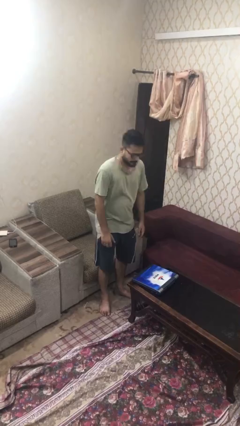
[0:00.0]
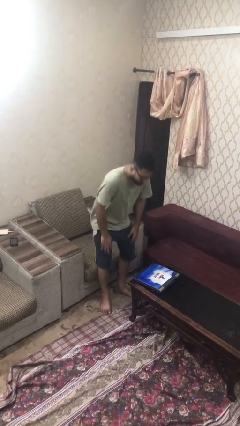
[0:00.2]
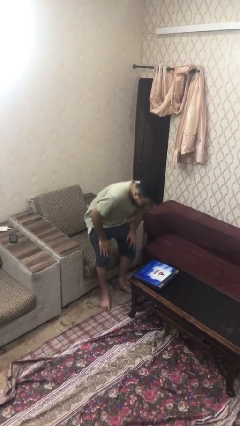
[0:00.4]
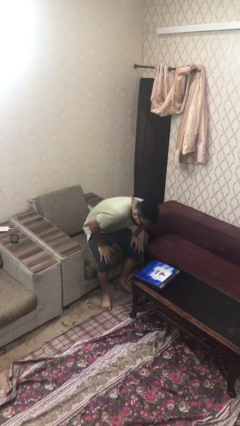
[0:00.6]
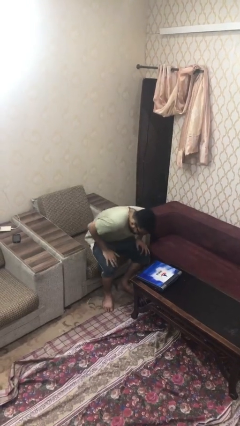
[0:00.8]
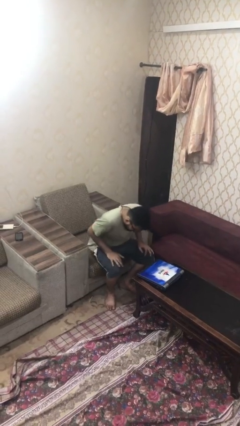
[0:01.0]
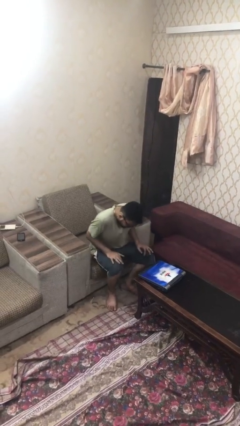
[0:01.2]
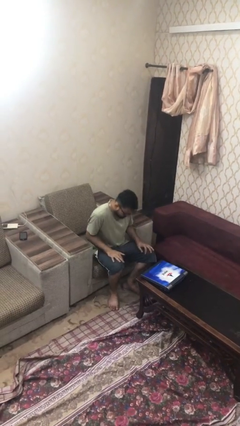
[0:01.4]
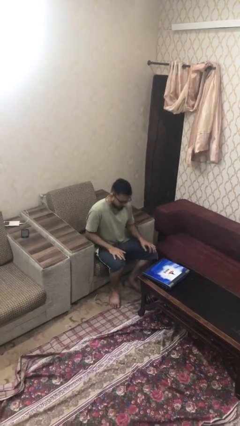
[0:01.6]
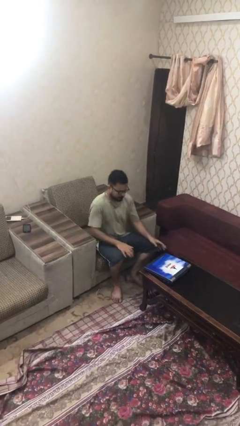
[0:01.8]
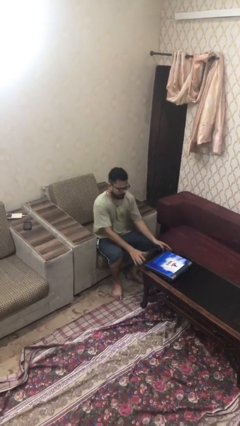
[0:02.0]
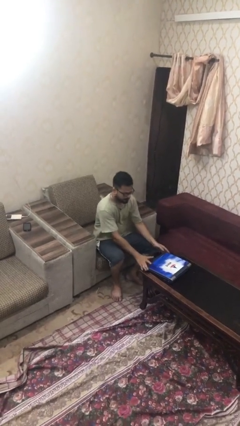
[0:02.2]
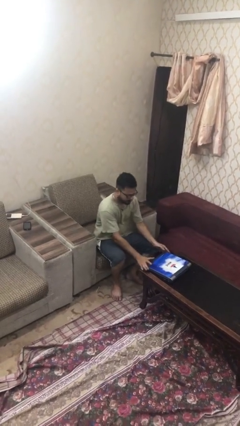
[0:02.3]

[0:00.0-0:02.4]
person sits down

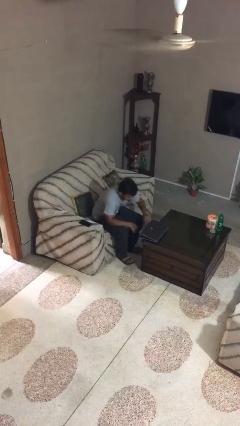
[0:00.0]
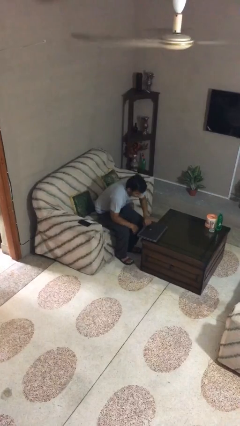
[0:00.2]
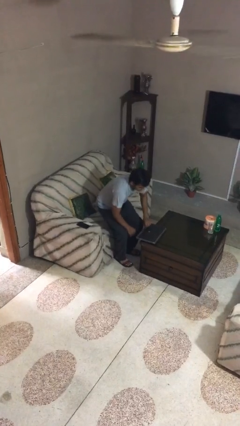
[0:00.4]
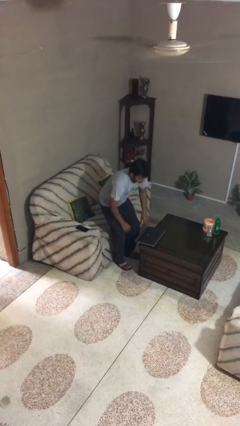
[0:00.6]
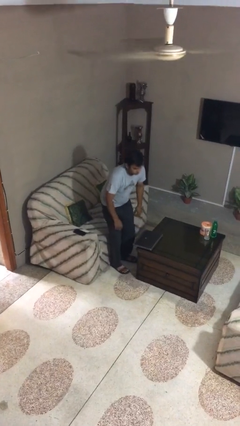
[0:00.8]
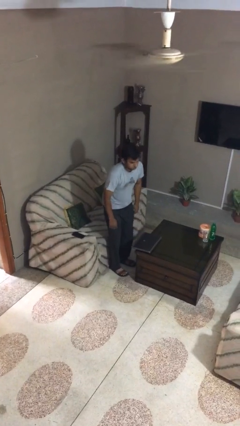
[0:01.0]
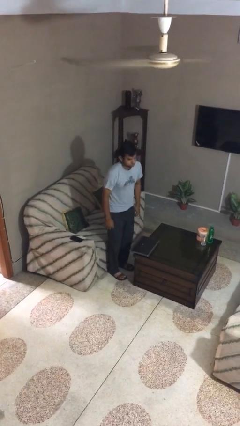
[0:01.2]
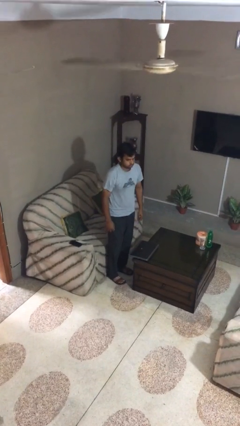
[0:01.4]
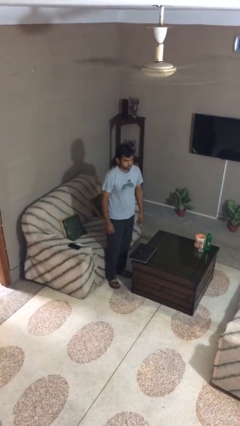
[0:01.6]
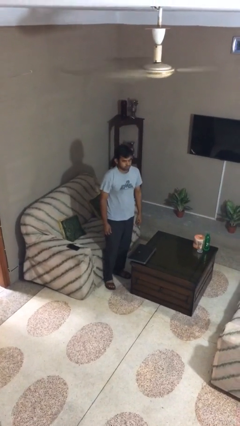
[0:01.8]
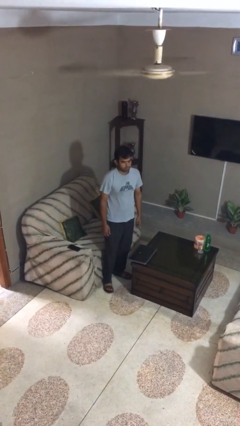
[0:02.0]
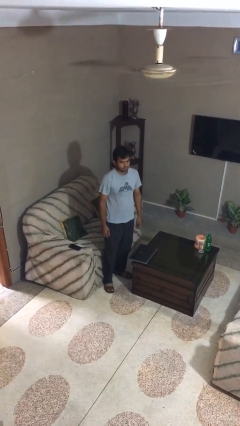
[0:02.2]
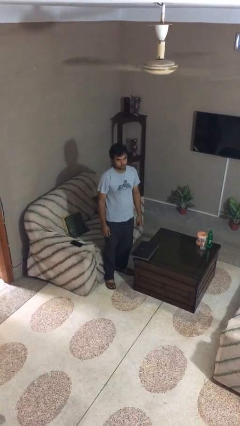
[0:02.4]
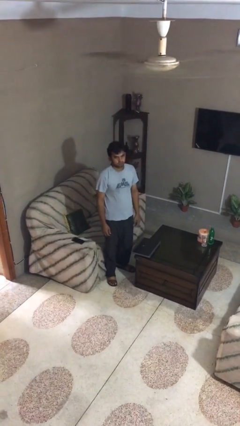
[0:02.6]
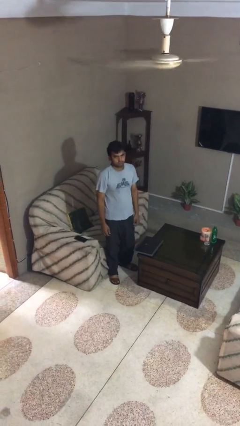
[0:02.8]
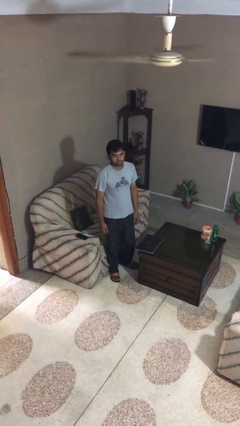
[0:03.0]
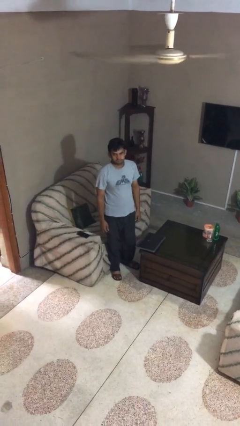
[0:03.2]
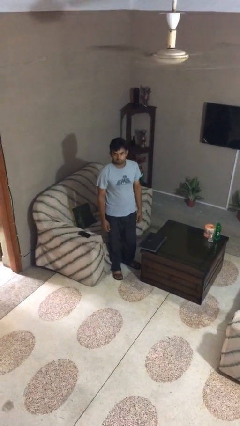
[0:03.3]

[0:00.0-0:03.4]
person stands up

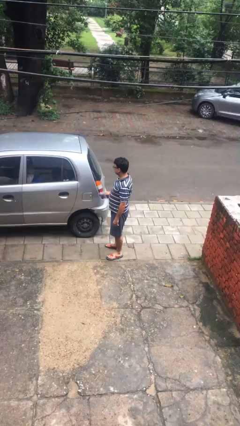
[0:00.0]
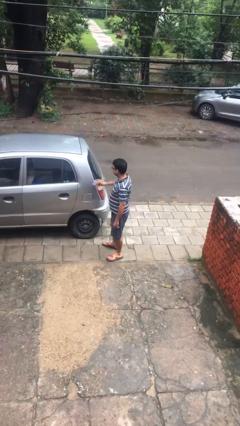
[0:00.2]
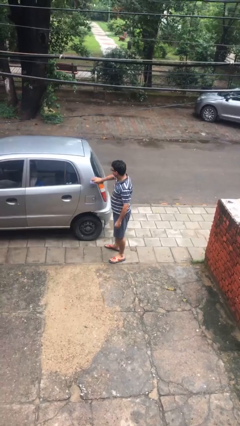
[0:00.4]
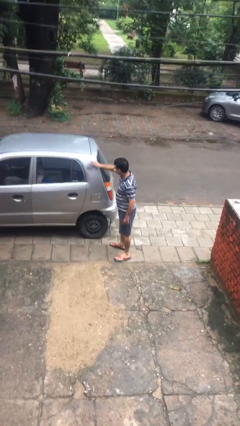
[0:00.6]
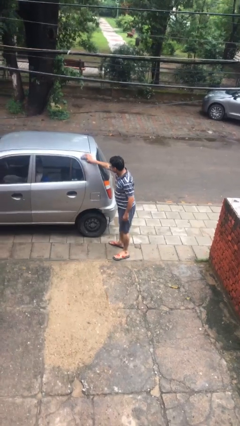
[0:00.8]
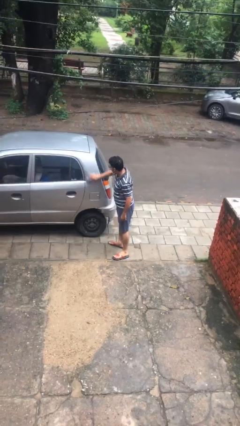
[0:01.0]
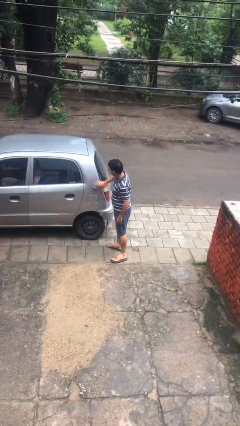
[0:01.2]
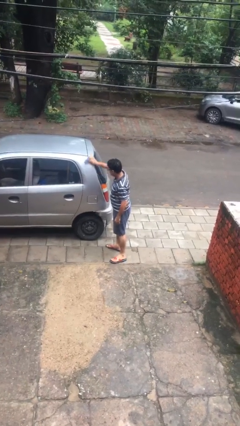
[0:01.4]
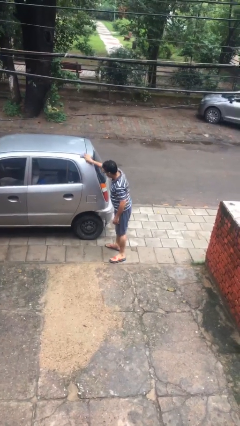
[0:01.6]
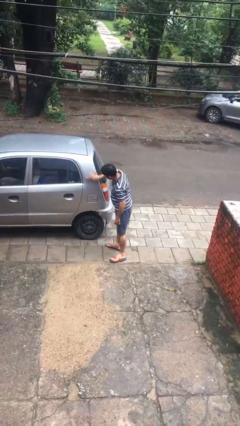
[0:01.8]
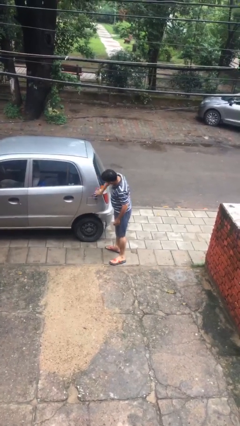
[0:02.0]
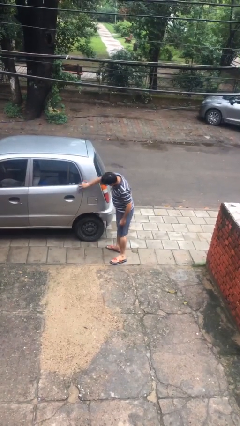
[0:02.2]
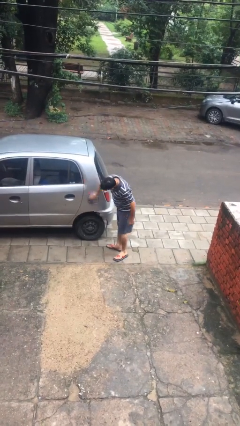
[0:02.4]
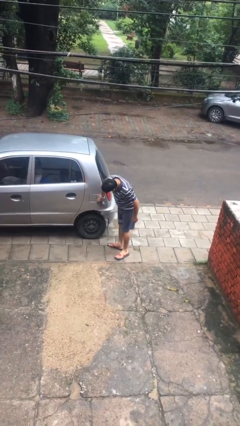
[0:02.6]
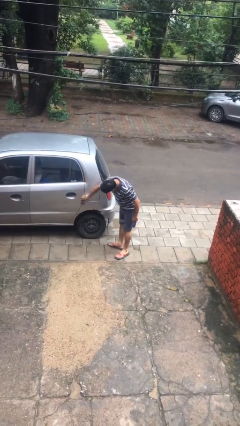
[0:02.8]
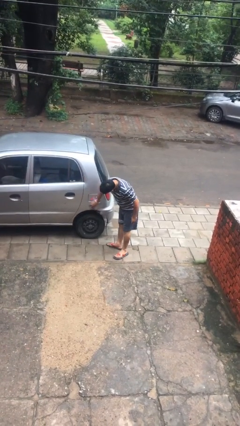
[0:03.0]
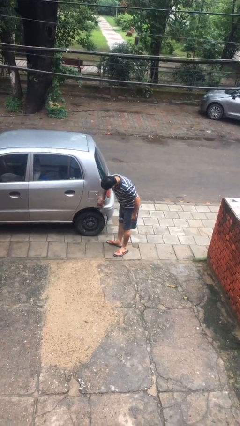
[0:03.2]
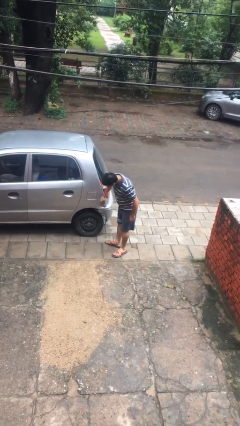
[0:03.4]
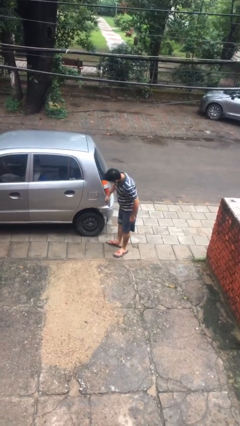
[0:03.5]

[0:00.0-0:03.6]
person polishes car with rag

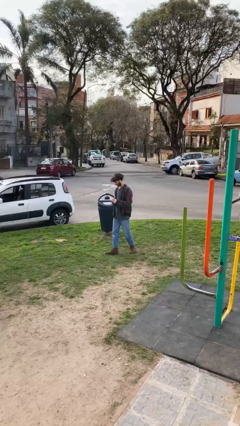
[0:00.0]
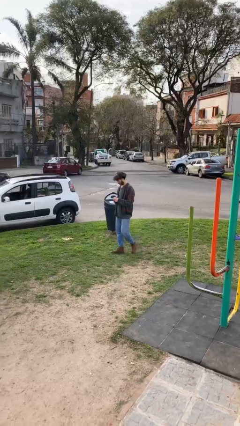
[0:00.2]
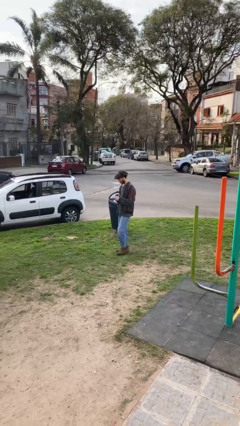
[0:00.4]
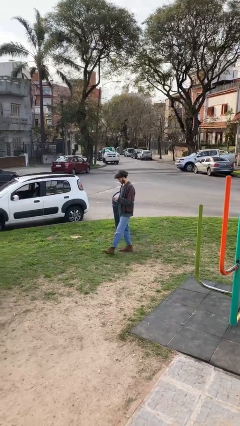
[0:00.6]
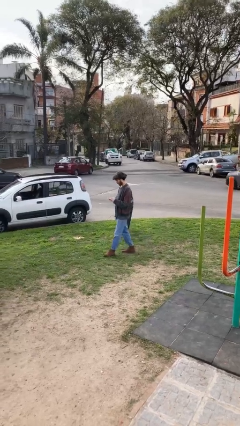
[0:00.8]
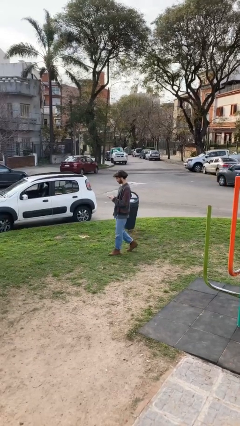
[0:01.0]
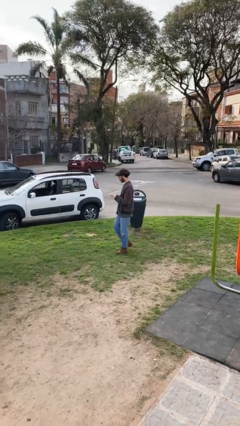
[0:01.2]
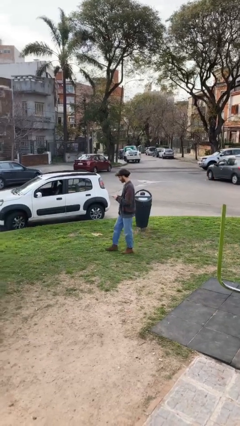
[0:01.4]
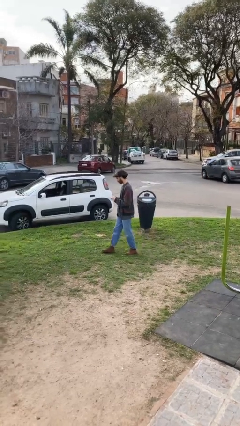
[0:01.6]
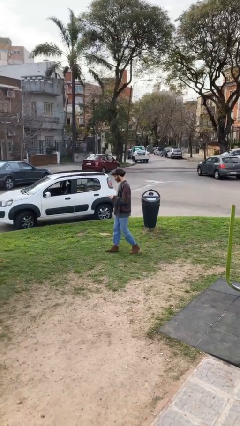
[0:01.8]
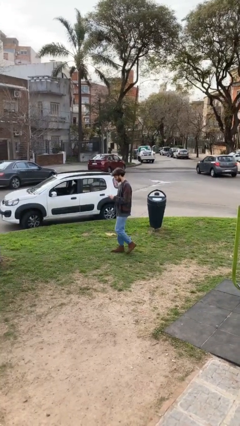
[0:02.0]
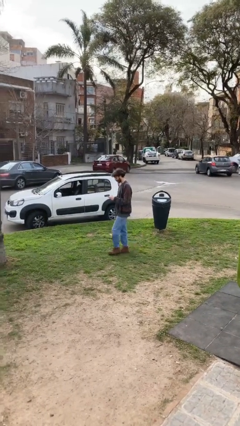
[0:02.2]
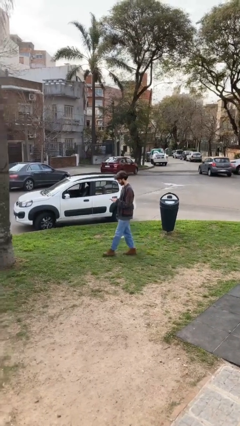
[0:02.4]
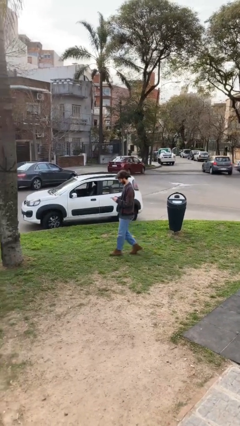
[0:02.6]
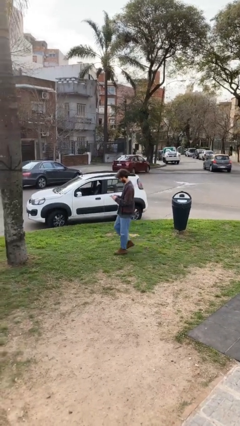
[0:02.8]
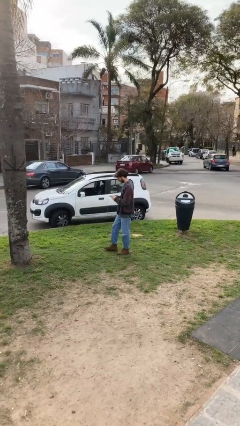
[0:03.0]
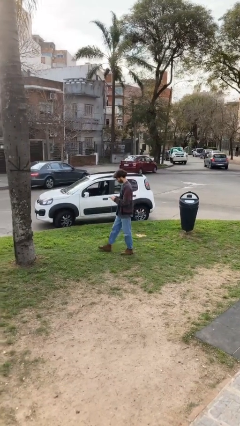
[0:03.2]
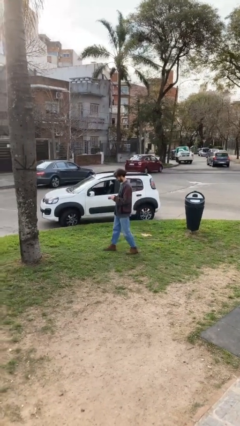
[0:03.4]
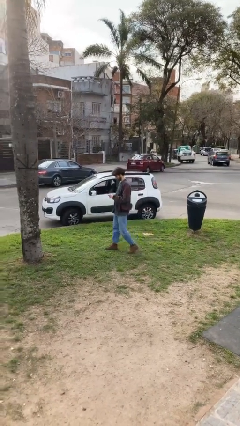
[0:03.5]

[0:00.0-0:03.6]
person texts on phone

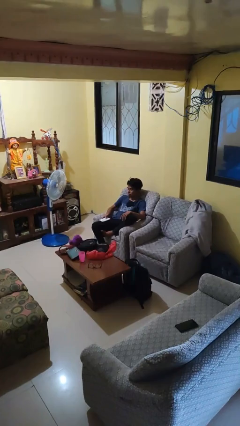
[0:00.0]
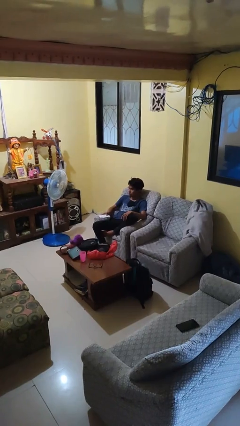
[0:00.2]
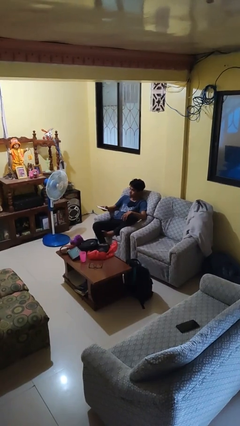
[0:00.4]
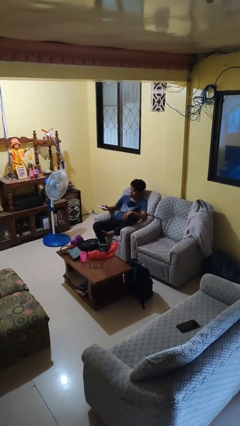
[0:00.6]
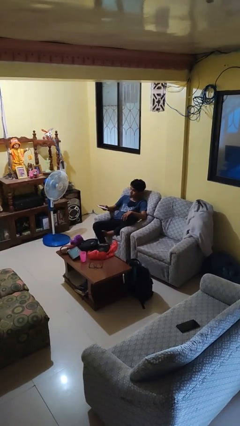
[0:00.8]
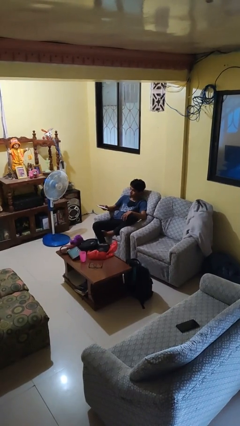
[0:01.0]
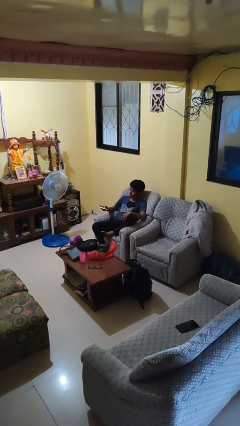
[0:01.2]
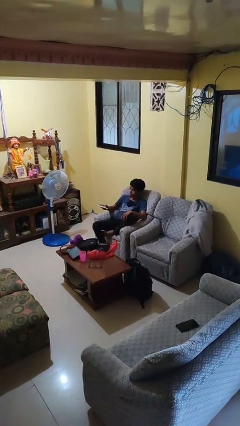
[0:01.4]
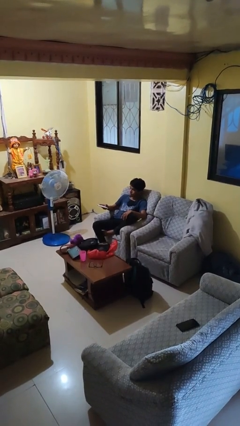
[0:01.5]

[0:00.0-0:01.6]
person uses television remote

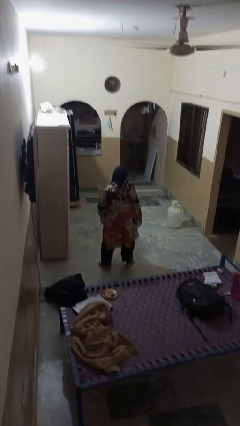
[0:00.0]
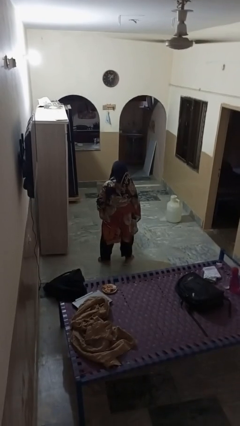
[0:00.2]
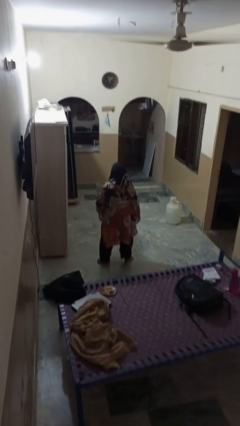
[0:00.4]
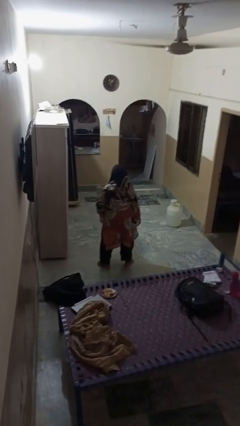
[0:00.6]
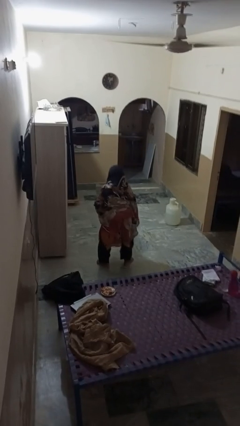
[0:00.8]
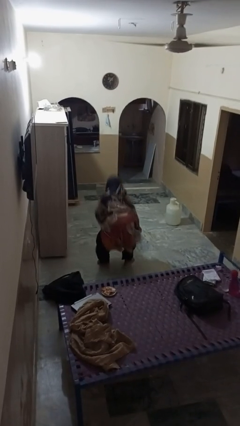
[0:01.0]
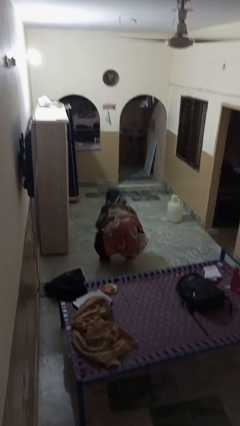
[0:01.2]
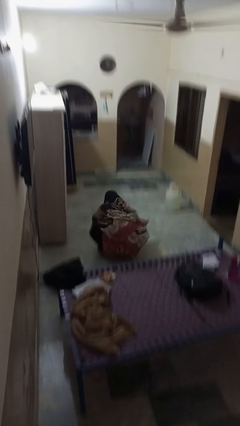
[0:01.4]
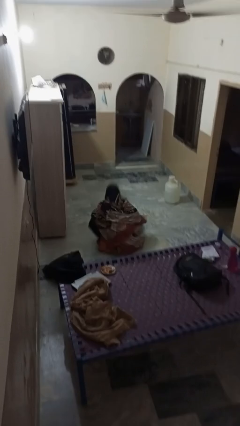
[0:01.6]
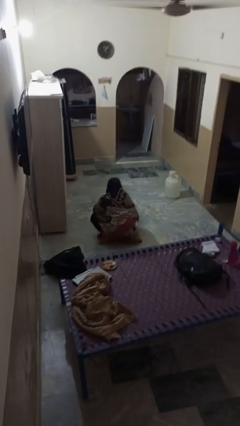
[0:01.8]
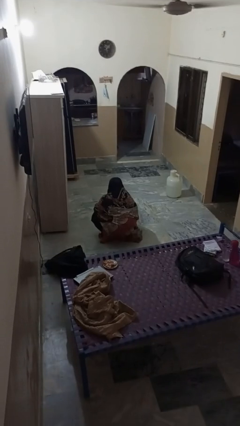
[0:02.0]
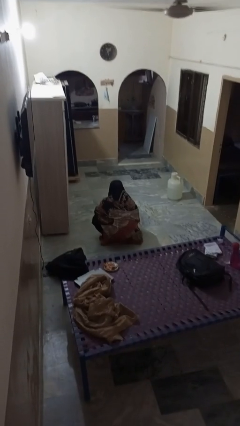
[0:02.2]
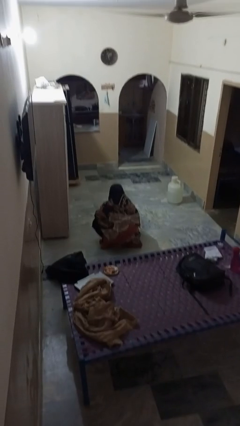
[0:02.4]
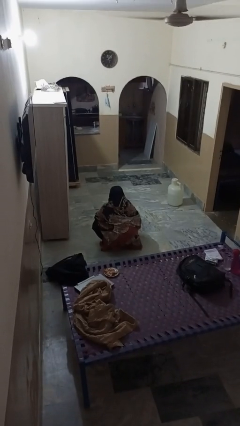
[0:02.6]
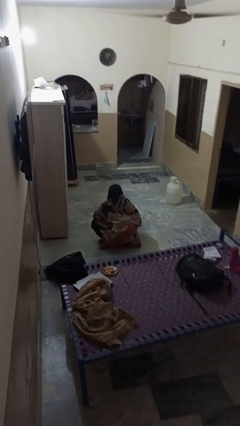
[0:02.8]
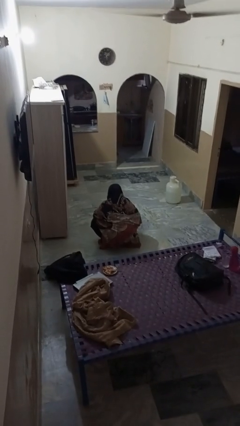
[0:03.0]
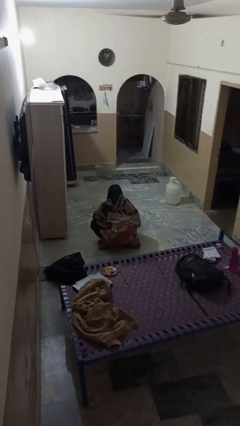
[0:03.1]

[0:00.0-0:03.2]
person squats
